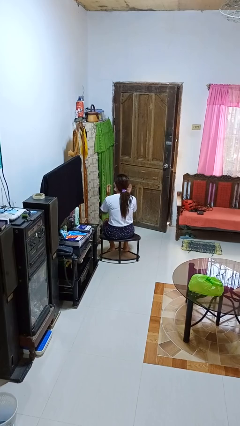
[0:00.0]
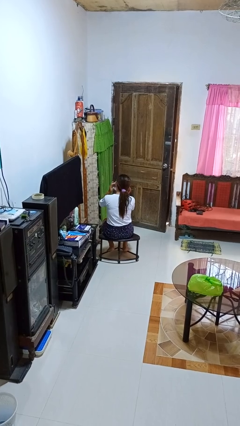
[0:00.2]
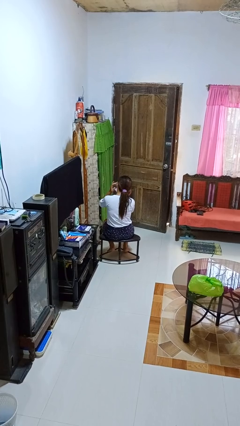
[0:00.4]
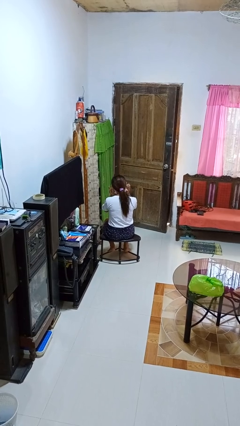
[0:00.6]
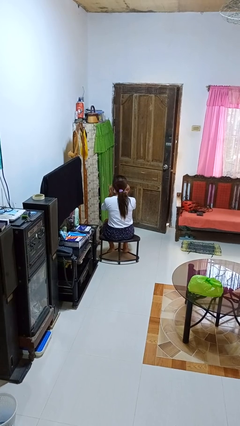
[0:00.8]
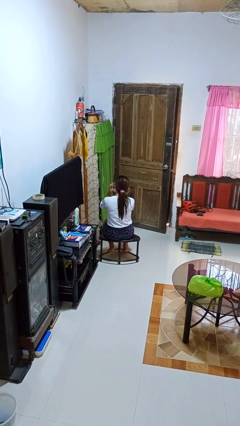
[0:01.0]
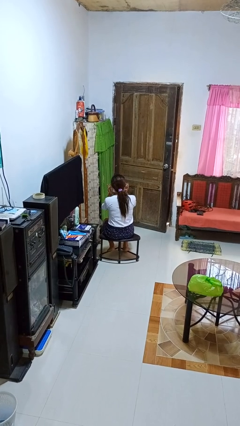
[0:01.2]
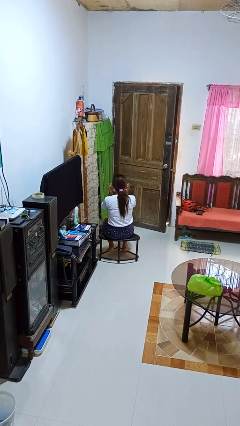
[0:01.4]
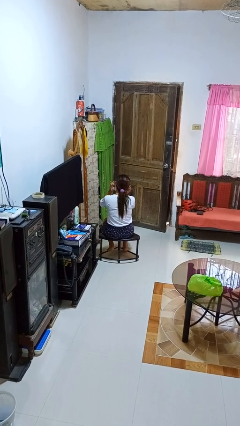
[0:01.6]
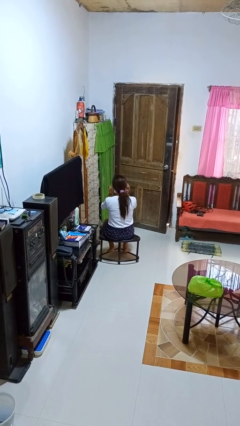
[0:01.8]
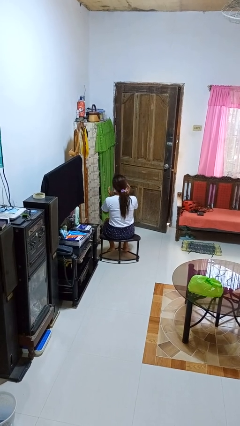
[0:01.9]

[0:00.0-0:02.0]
person puts fingers in ear

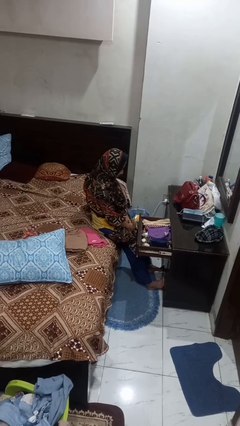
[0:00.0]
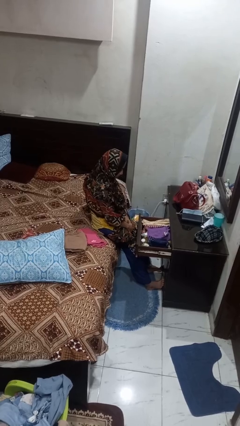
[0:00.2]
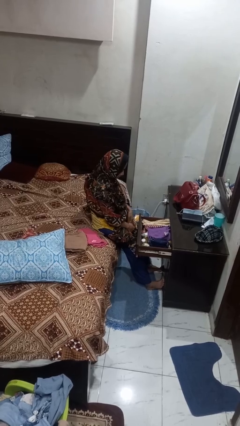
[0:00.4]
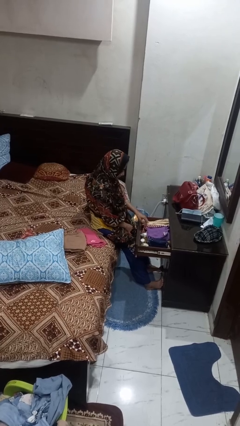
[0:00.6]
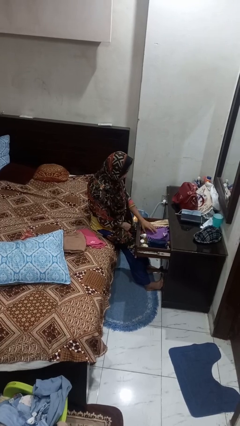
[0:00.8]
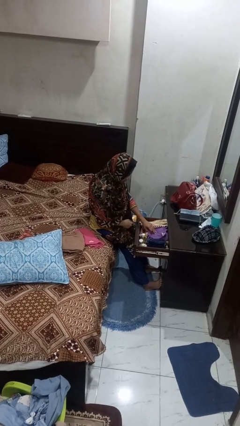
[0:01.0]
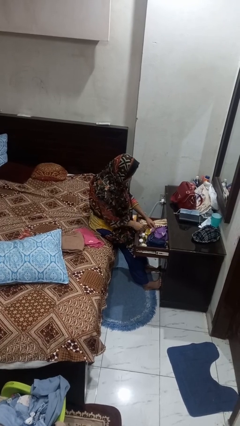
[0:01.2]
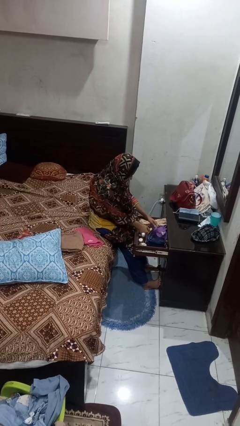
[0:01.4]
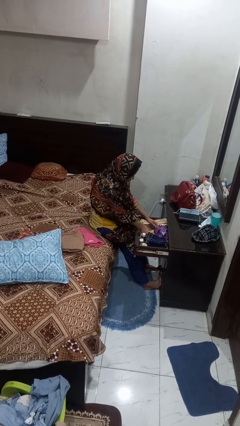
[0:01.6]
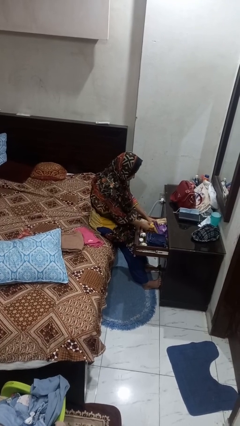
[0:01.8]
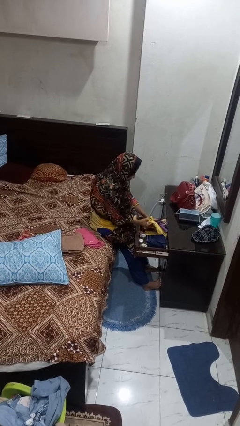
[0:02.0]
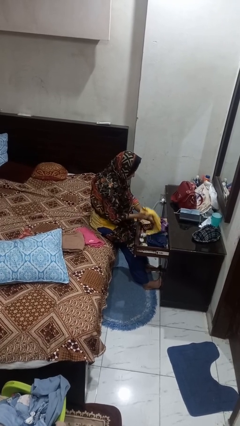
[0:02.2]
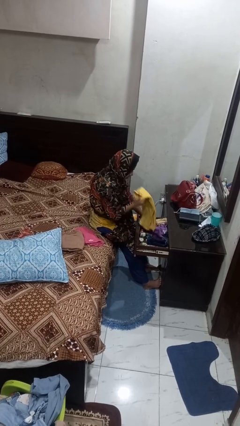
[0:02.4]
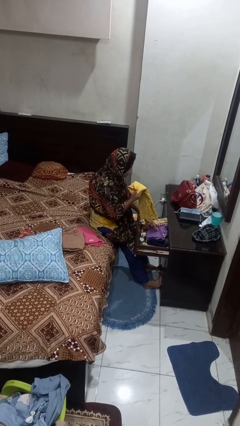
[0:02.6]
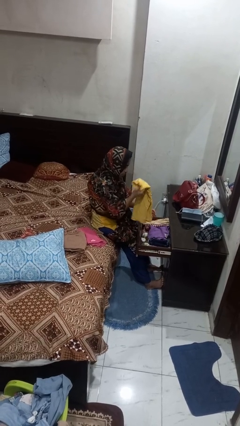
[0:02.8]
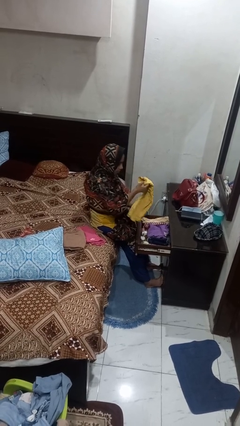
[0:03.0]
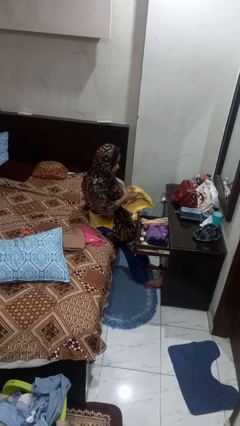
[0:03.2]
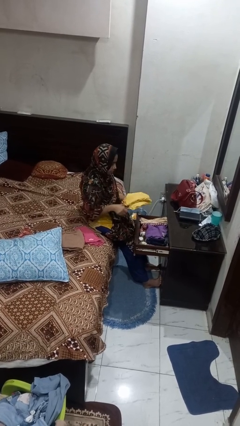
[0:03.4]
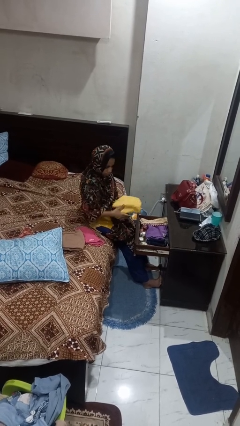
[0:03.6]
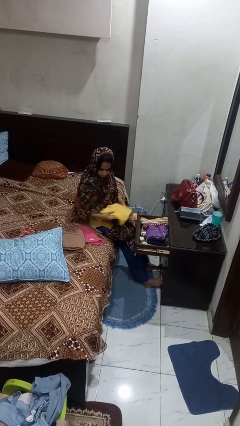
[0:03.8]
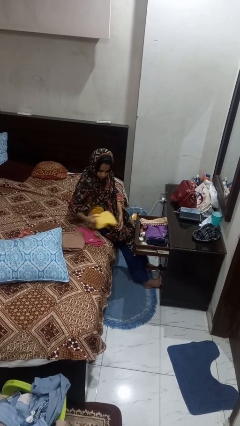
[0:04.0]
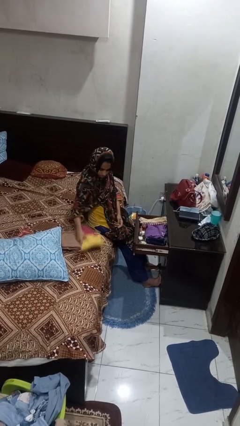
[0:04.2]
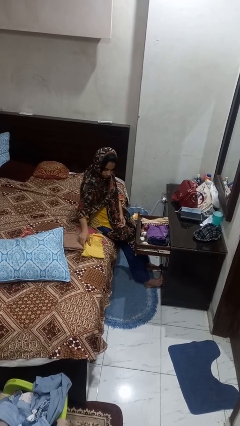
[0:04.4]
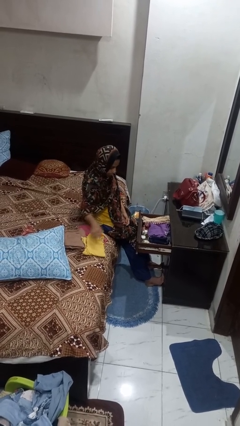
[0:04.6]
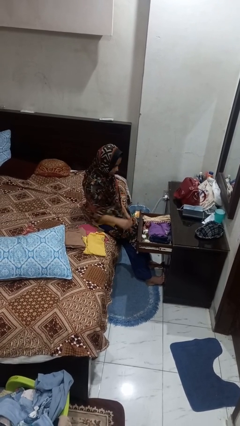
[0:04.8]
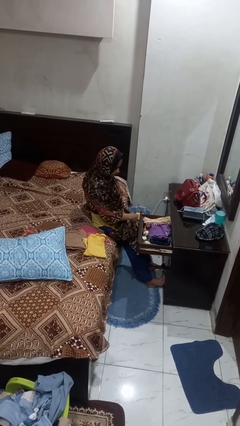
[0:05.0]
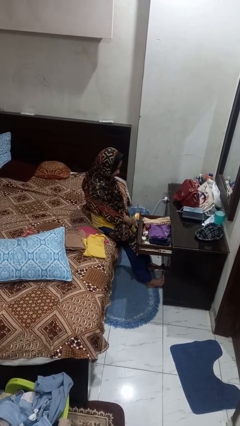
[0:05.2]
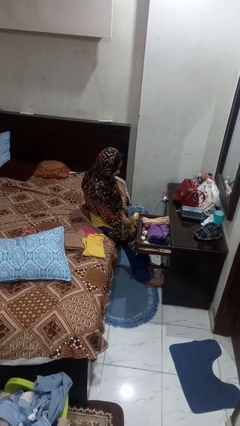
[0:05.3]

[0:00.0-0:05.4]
person takes clothes from dresser

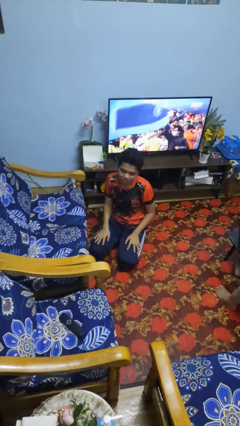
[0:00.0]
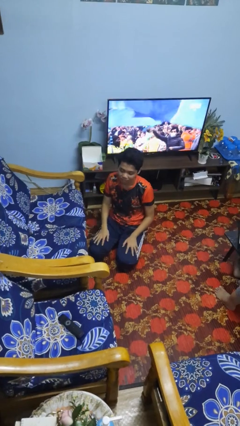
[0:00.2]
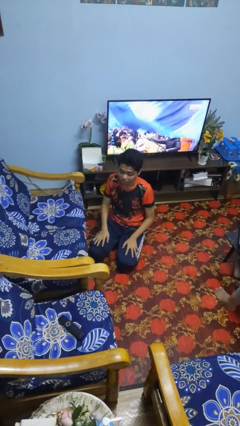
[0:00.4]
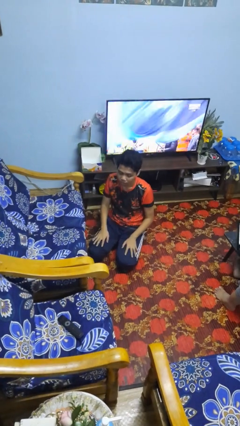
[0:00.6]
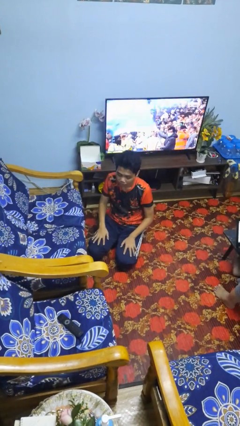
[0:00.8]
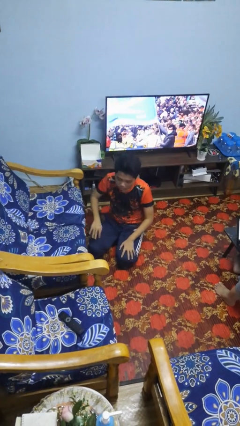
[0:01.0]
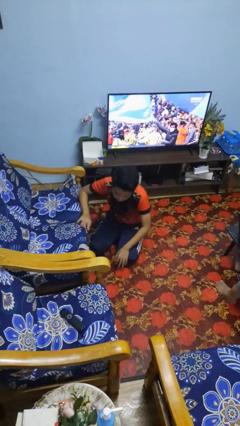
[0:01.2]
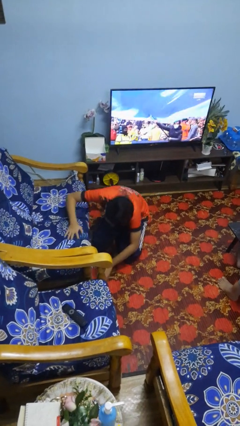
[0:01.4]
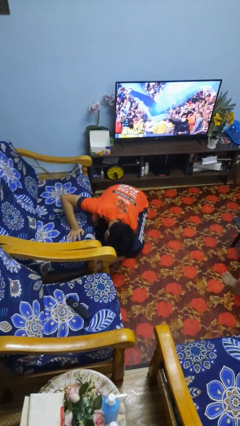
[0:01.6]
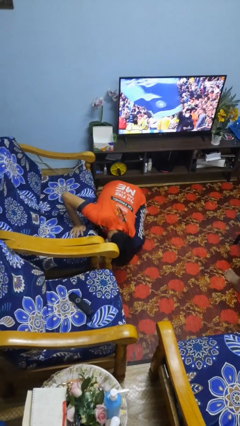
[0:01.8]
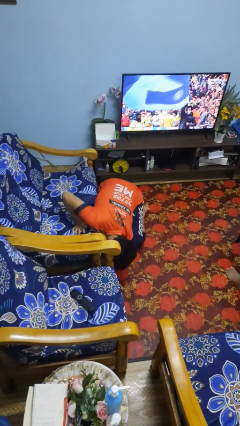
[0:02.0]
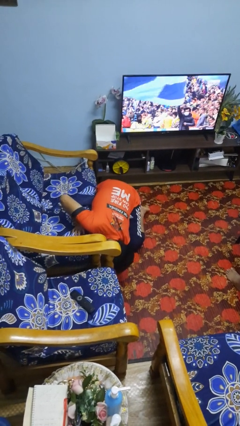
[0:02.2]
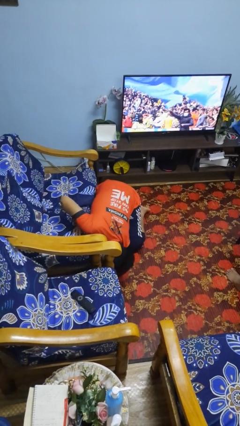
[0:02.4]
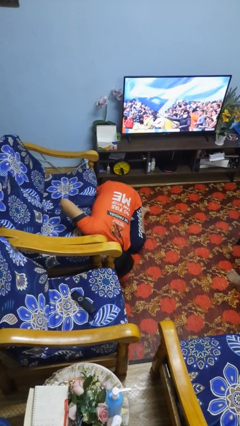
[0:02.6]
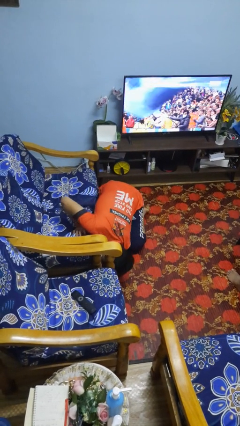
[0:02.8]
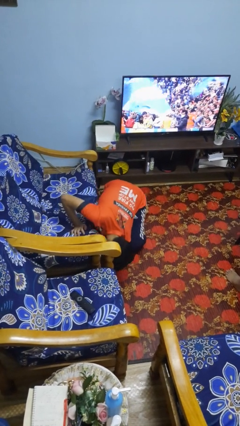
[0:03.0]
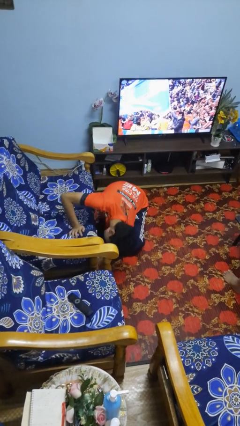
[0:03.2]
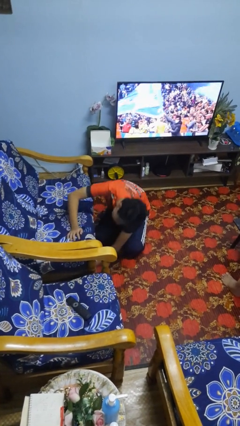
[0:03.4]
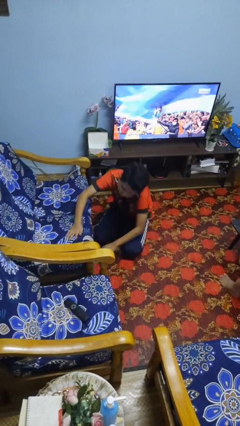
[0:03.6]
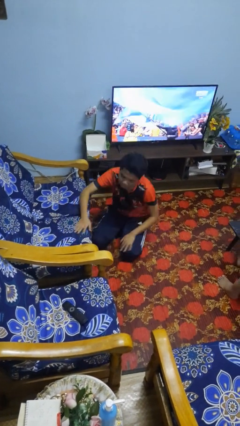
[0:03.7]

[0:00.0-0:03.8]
person searches under couch

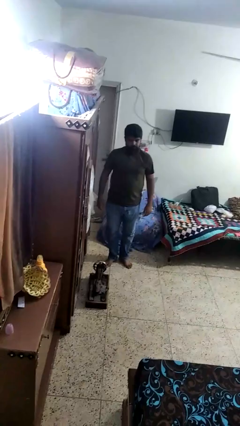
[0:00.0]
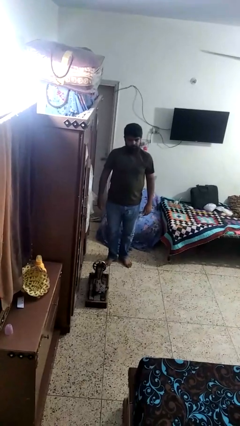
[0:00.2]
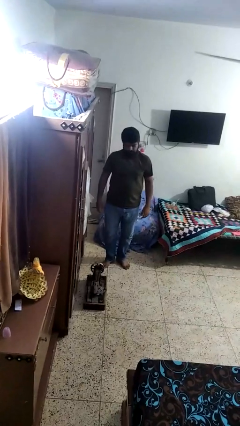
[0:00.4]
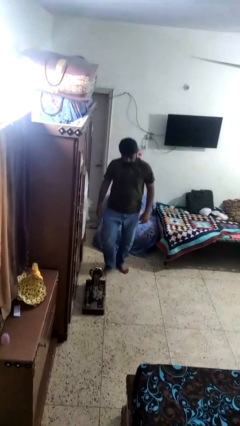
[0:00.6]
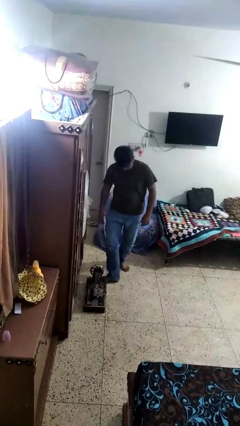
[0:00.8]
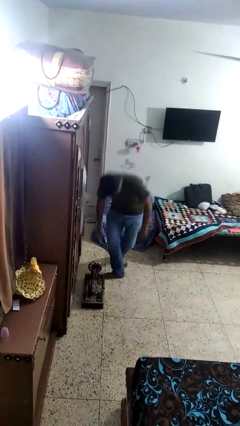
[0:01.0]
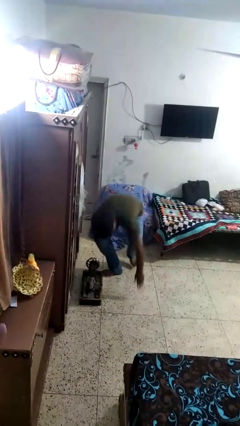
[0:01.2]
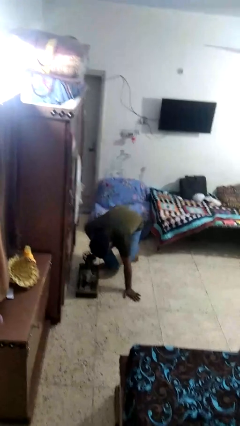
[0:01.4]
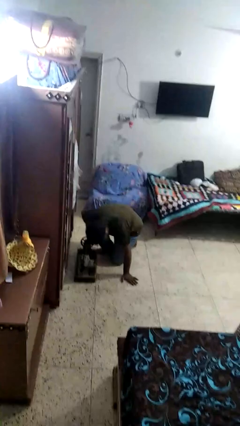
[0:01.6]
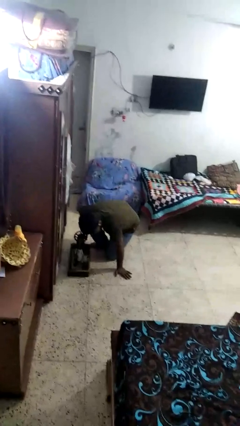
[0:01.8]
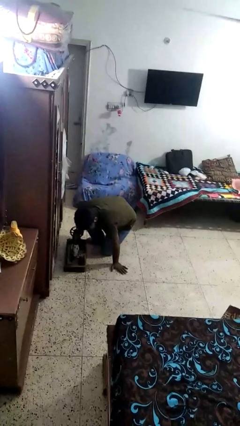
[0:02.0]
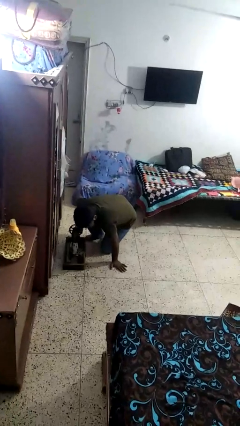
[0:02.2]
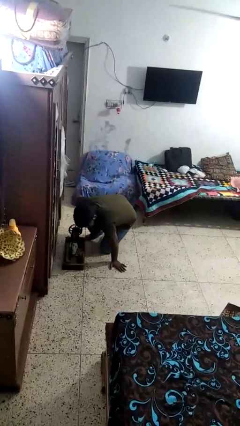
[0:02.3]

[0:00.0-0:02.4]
person trips on object on floor

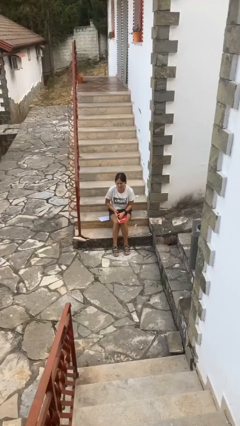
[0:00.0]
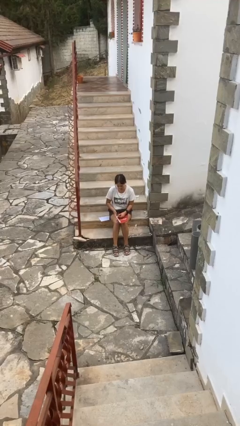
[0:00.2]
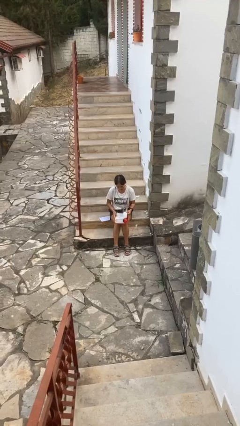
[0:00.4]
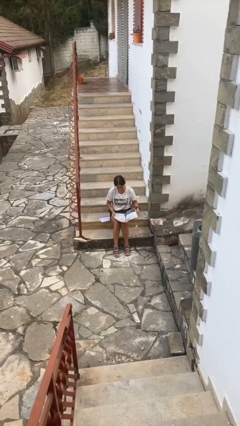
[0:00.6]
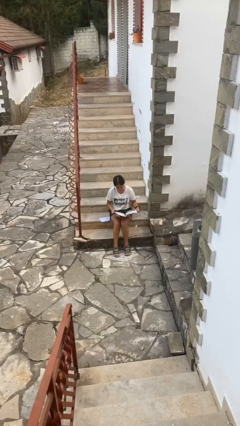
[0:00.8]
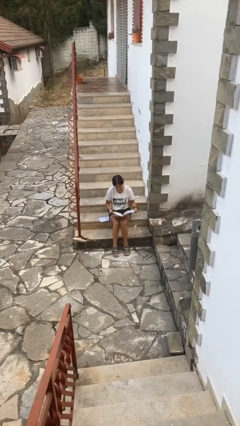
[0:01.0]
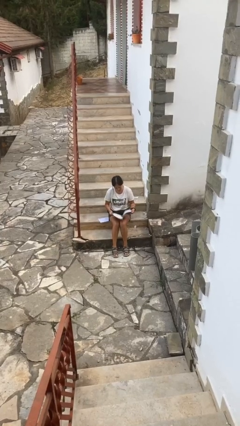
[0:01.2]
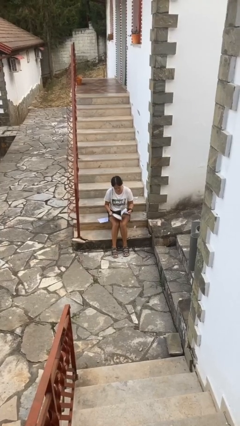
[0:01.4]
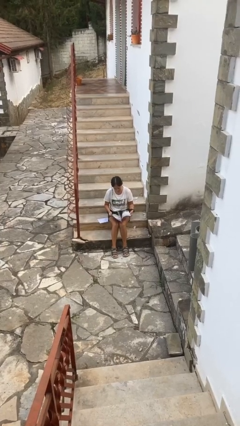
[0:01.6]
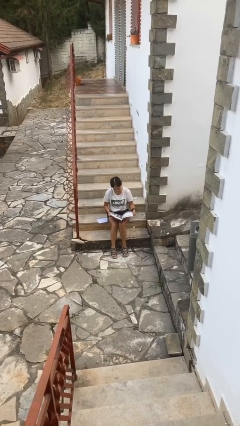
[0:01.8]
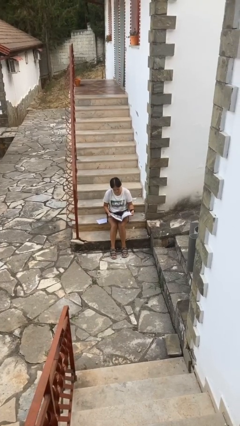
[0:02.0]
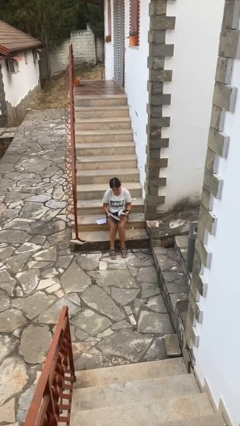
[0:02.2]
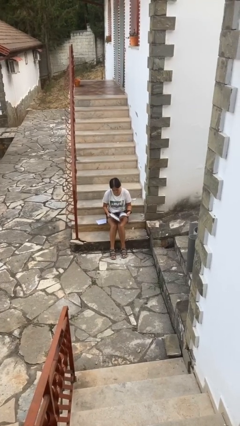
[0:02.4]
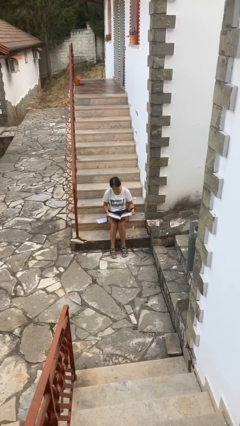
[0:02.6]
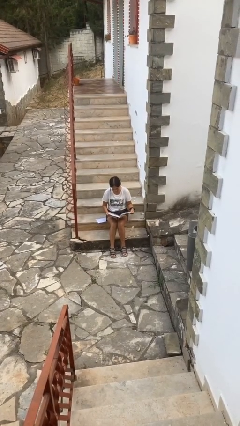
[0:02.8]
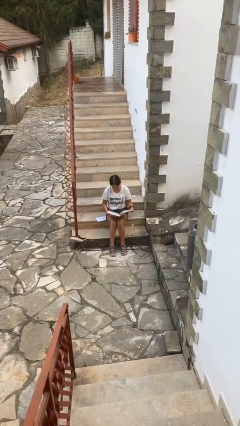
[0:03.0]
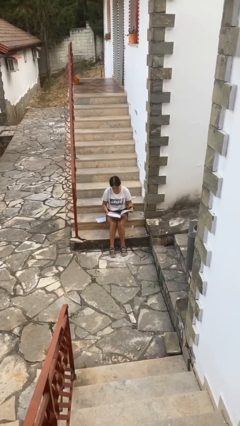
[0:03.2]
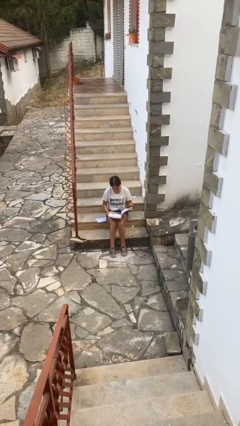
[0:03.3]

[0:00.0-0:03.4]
person reads magazine

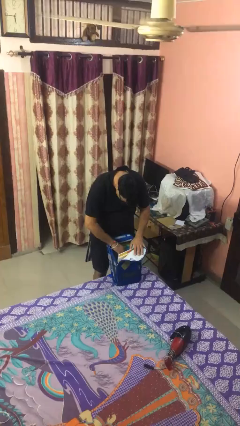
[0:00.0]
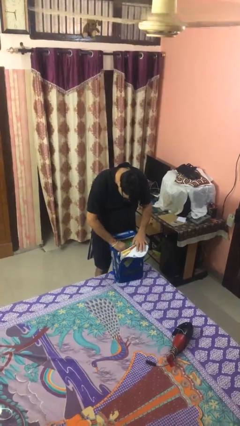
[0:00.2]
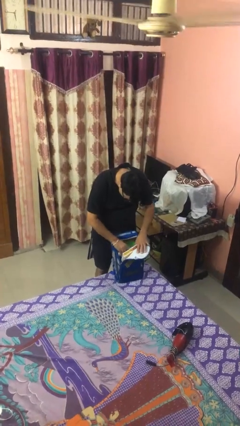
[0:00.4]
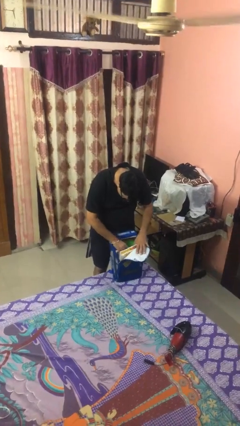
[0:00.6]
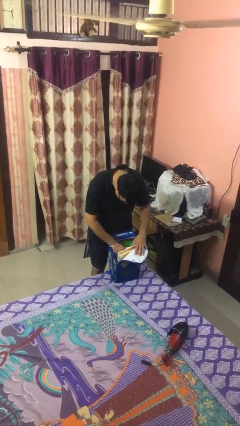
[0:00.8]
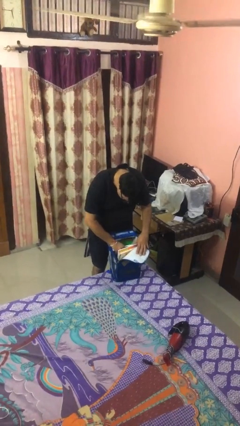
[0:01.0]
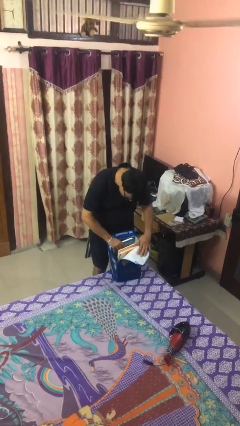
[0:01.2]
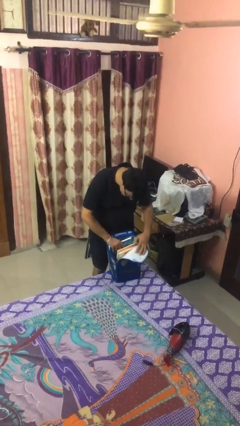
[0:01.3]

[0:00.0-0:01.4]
person searches in backpack
